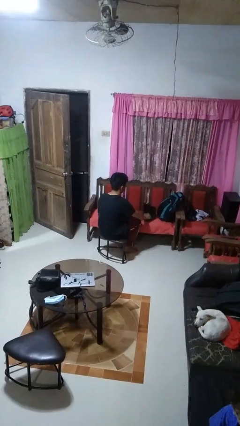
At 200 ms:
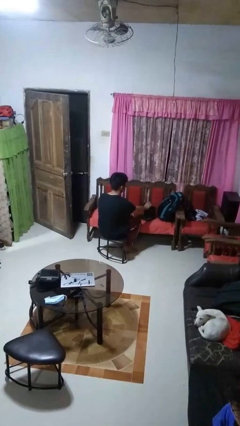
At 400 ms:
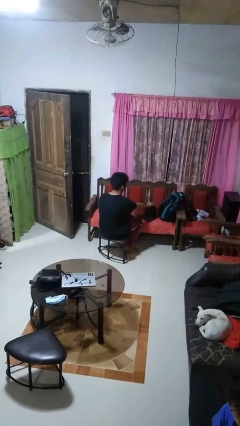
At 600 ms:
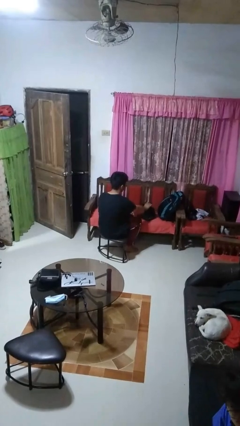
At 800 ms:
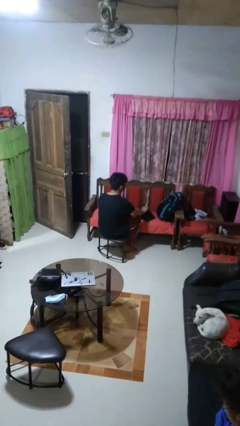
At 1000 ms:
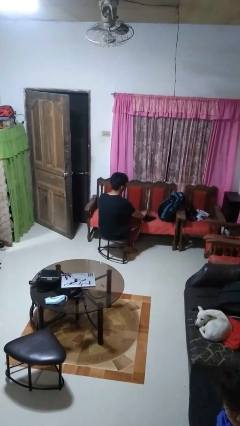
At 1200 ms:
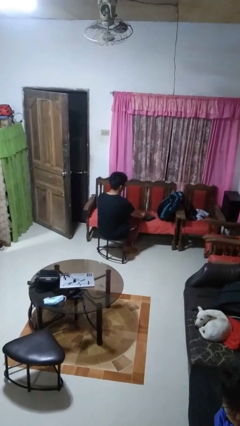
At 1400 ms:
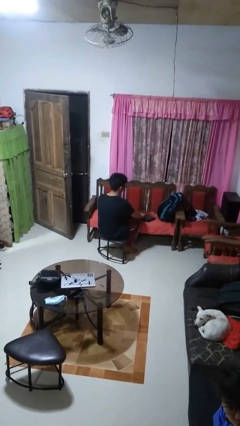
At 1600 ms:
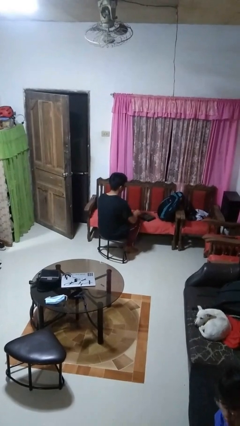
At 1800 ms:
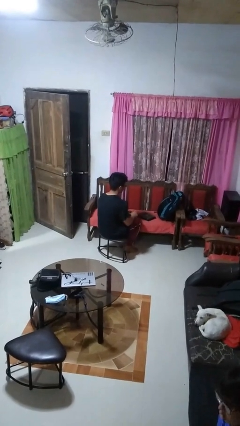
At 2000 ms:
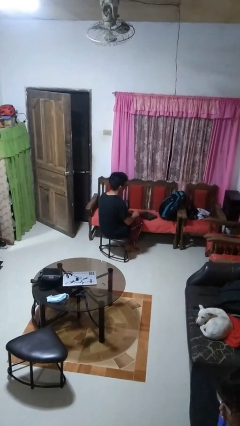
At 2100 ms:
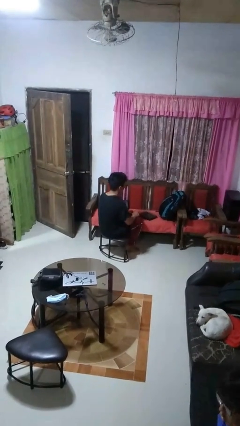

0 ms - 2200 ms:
person closes laptop

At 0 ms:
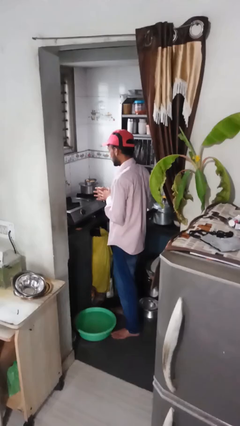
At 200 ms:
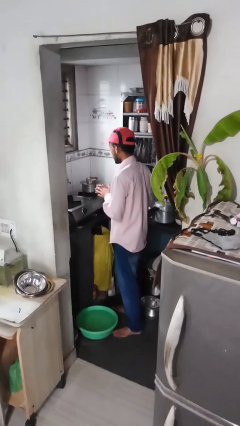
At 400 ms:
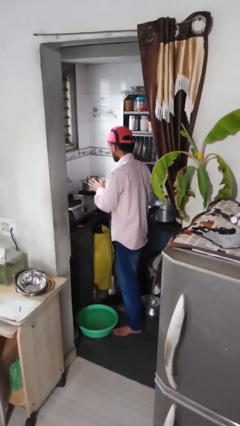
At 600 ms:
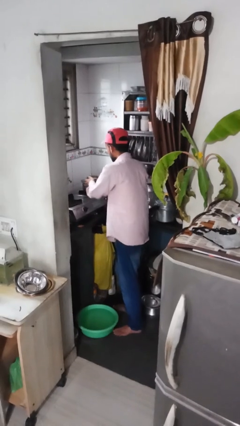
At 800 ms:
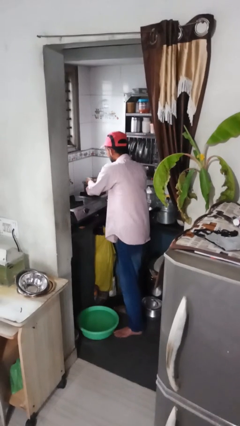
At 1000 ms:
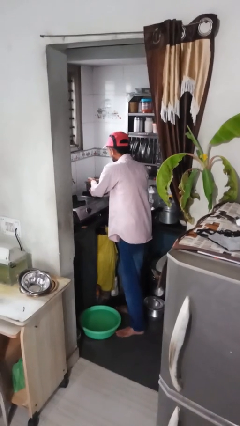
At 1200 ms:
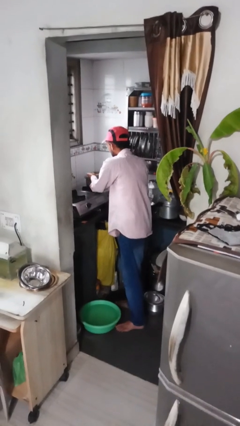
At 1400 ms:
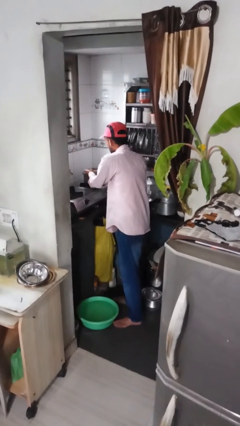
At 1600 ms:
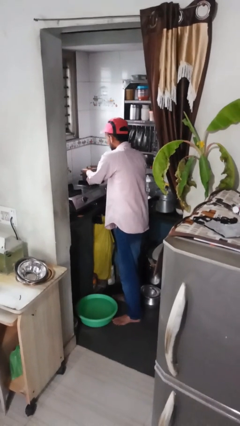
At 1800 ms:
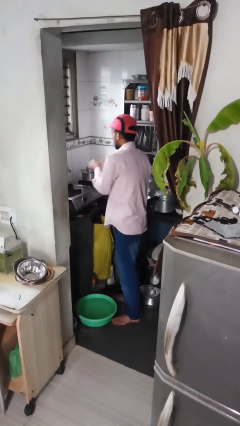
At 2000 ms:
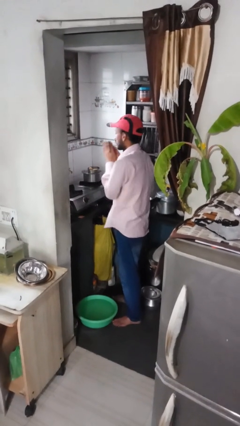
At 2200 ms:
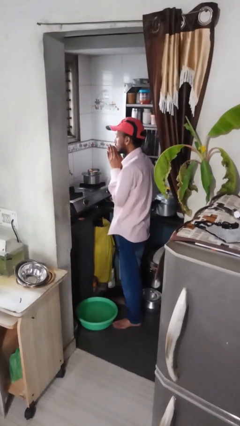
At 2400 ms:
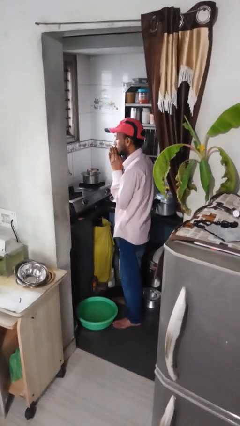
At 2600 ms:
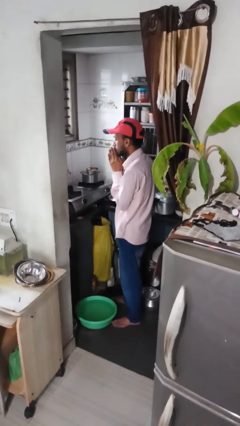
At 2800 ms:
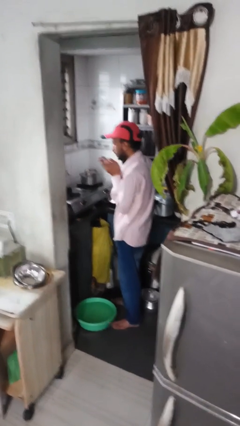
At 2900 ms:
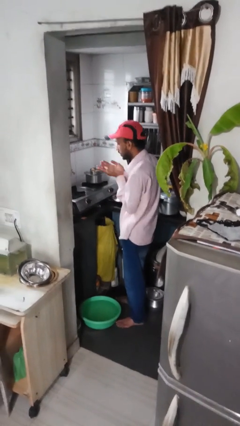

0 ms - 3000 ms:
person burns hand

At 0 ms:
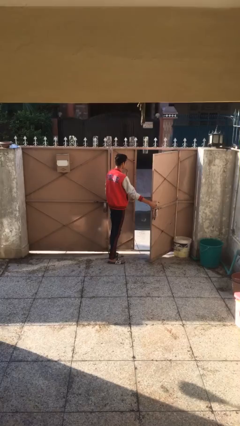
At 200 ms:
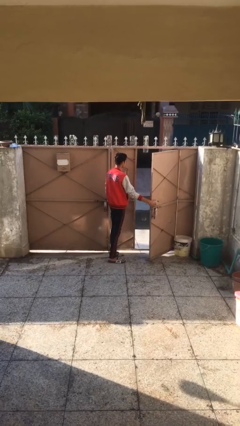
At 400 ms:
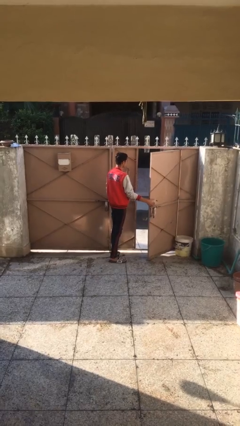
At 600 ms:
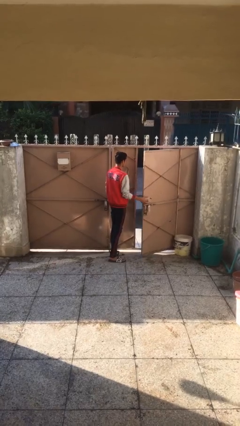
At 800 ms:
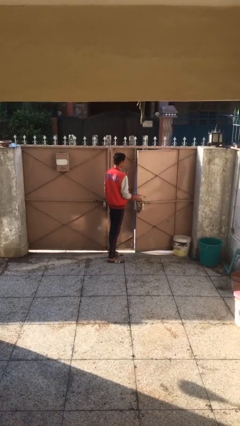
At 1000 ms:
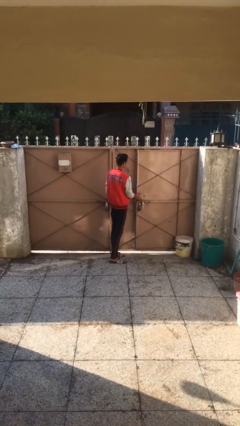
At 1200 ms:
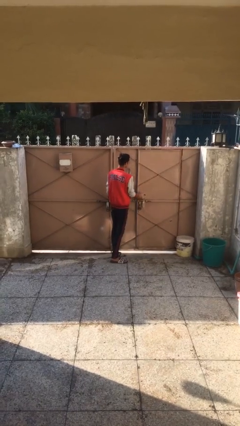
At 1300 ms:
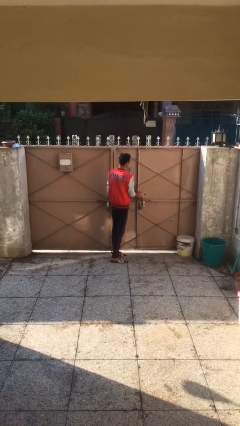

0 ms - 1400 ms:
person closes facility door

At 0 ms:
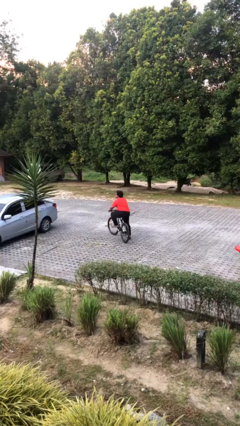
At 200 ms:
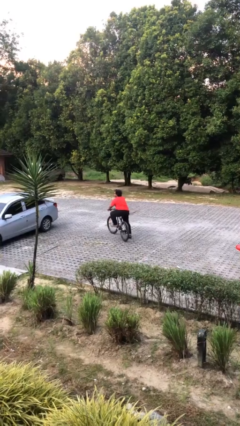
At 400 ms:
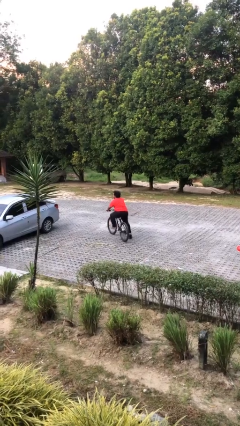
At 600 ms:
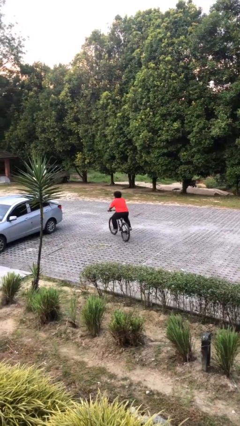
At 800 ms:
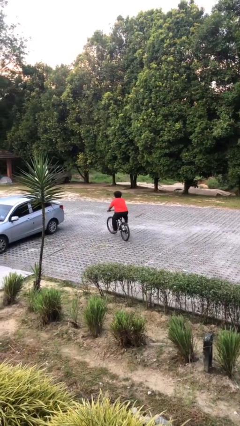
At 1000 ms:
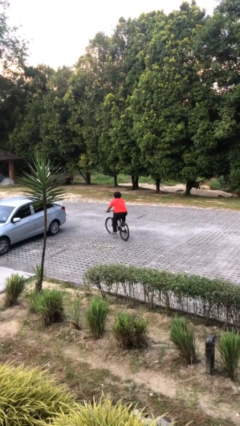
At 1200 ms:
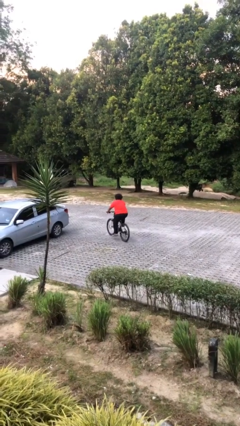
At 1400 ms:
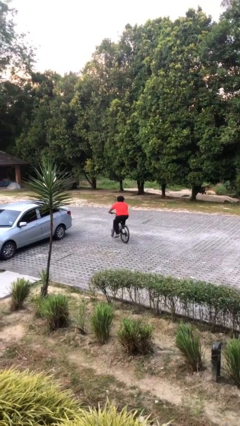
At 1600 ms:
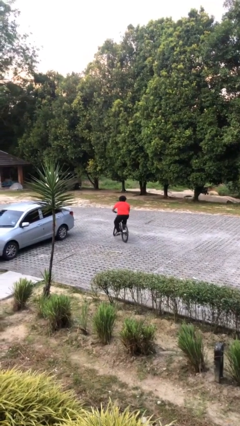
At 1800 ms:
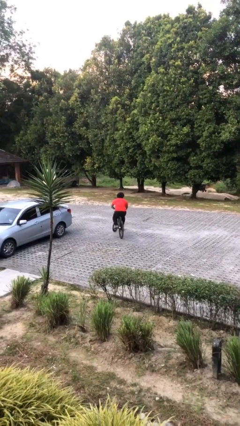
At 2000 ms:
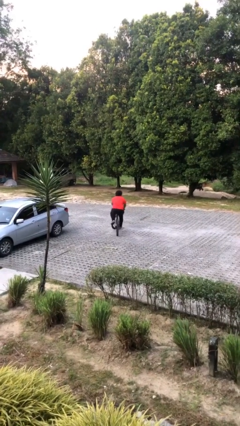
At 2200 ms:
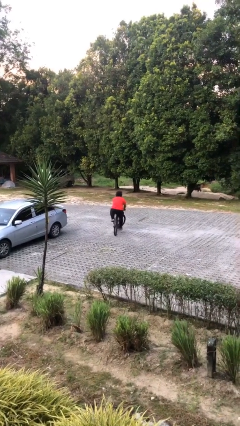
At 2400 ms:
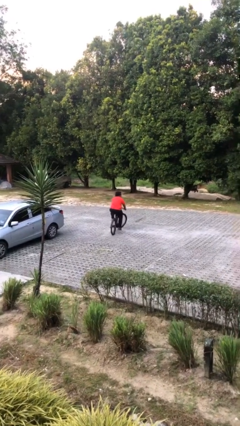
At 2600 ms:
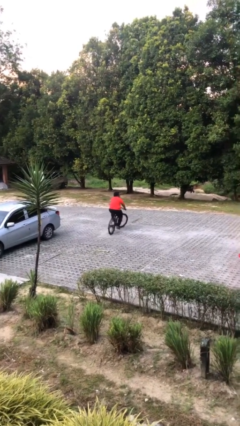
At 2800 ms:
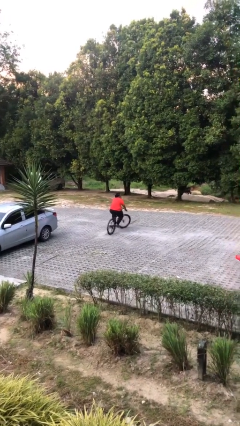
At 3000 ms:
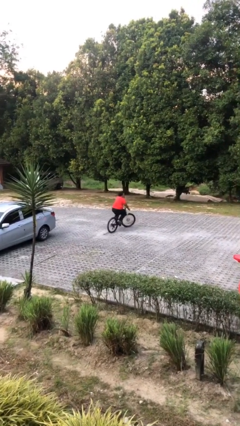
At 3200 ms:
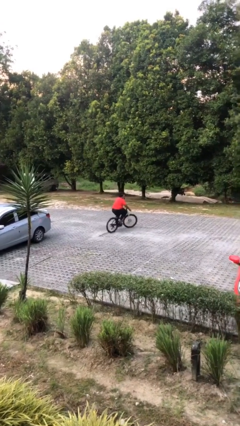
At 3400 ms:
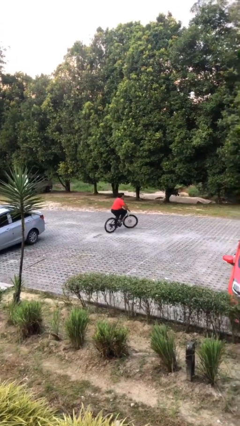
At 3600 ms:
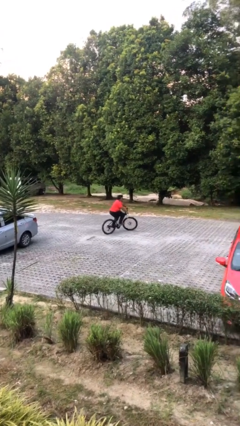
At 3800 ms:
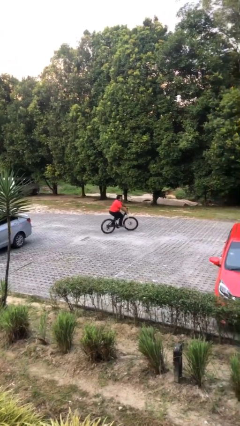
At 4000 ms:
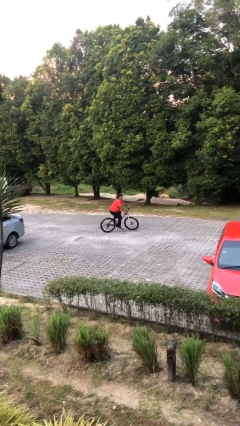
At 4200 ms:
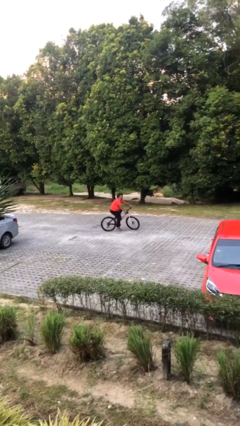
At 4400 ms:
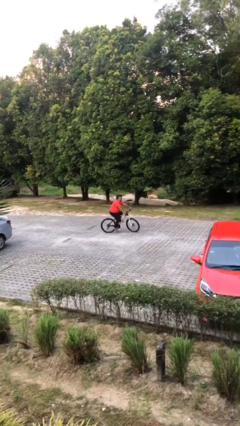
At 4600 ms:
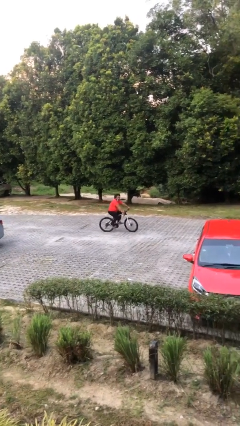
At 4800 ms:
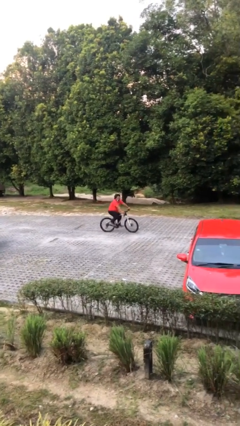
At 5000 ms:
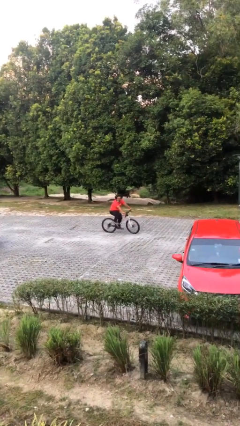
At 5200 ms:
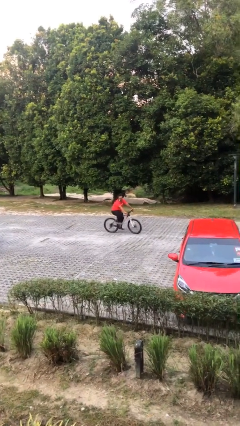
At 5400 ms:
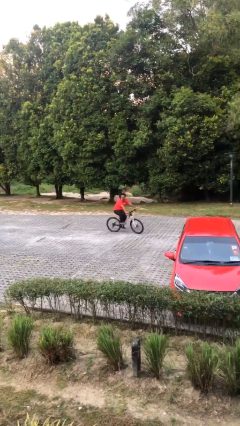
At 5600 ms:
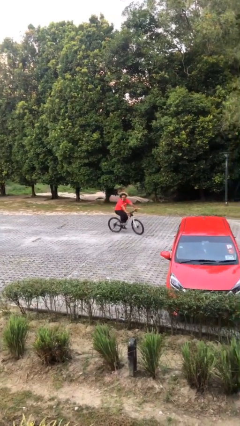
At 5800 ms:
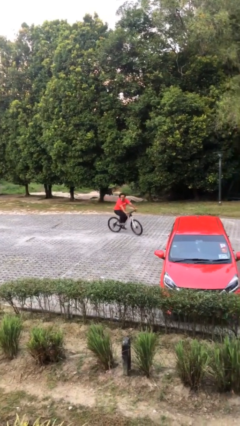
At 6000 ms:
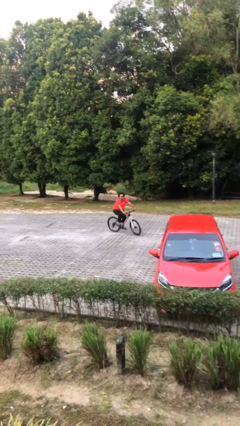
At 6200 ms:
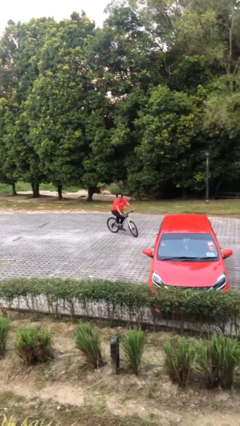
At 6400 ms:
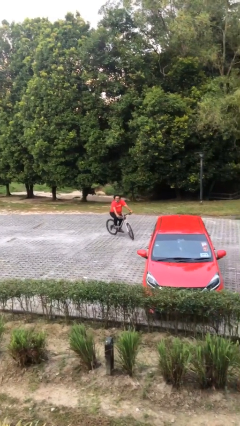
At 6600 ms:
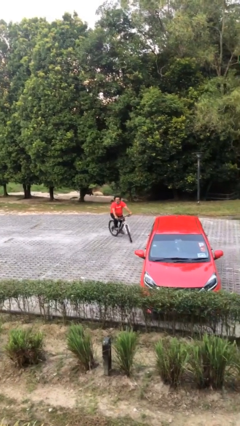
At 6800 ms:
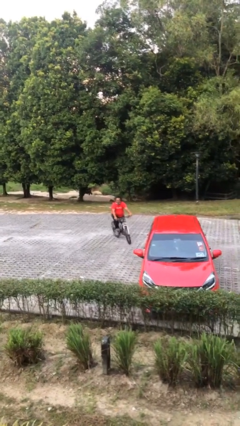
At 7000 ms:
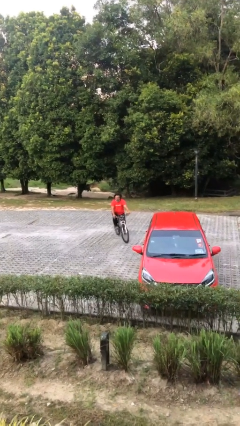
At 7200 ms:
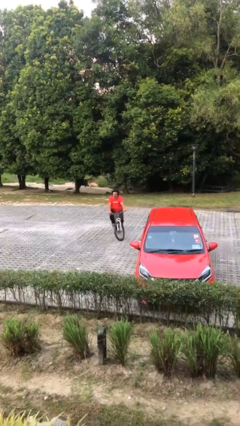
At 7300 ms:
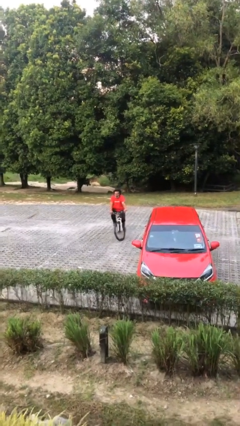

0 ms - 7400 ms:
person rides bicycle

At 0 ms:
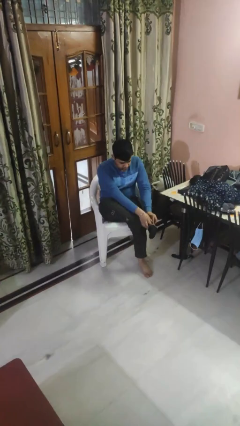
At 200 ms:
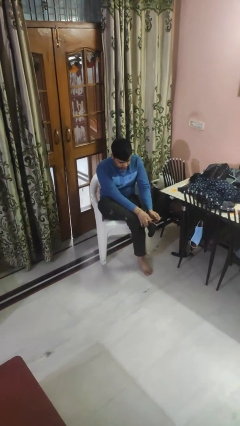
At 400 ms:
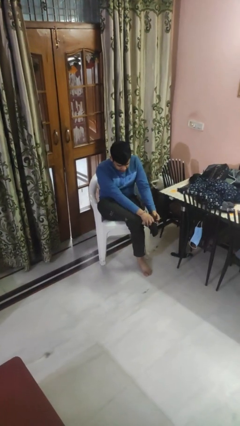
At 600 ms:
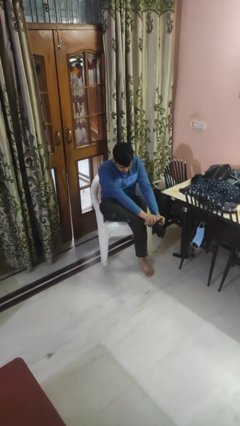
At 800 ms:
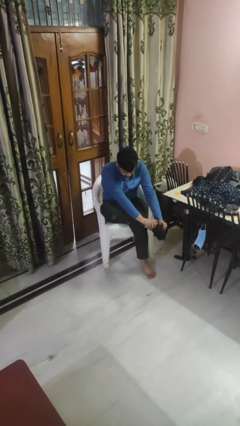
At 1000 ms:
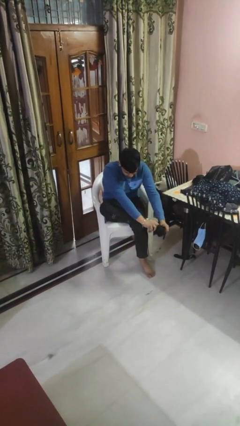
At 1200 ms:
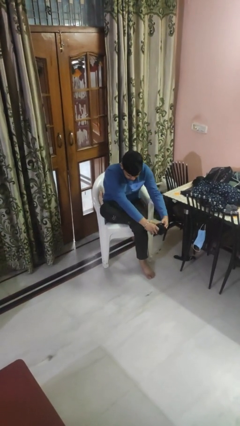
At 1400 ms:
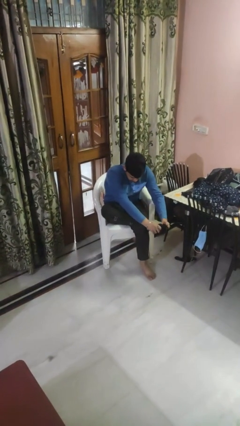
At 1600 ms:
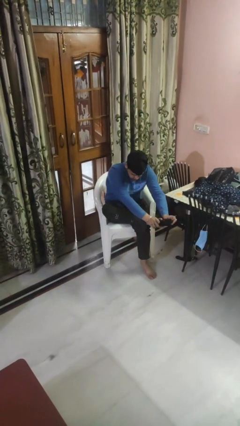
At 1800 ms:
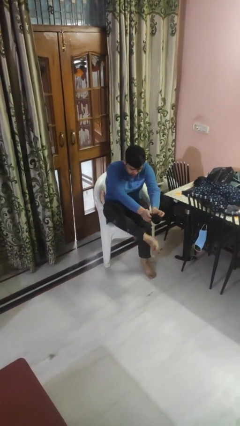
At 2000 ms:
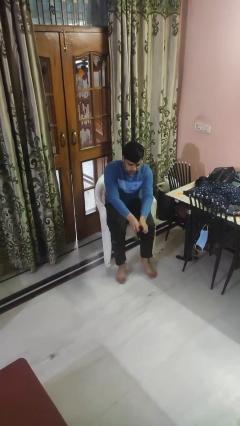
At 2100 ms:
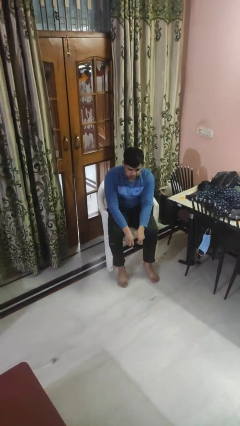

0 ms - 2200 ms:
person takes off socks

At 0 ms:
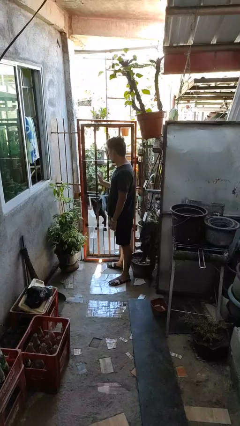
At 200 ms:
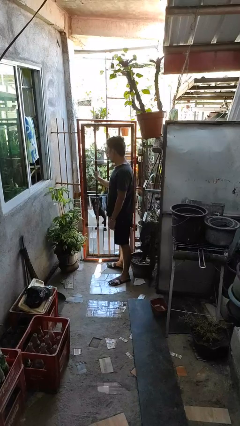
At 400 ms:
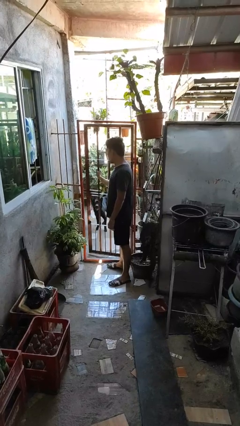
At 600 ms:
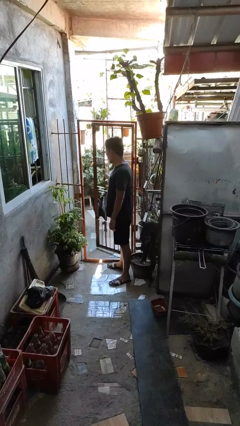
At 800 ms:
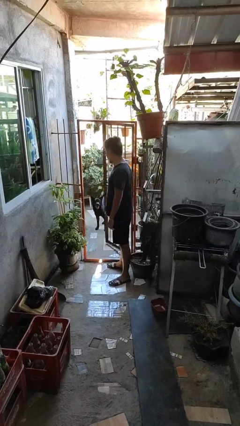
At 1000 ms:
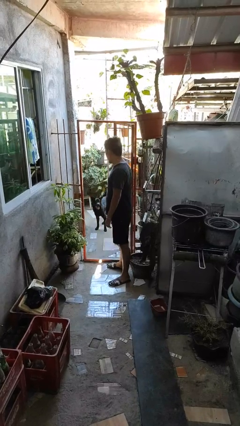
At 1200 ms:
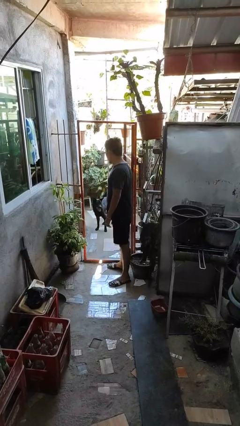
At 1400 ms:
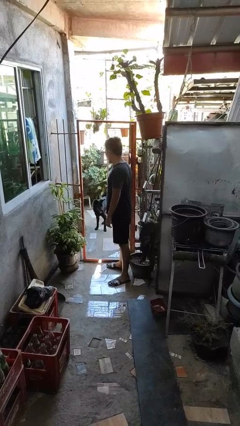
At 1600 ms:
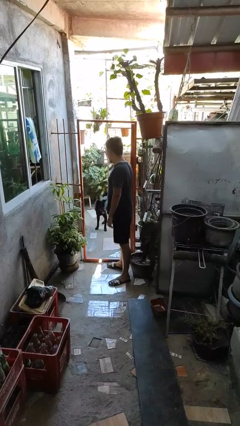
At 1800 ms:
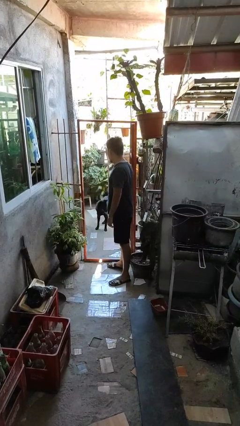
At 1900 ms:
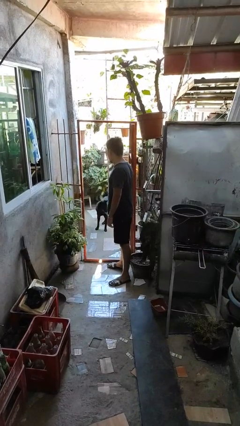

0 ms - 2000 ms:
person opens gate
